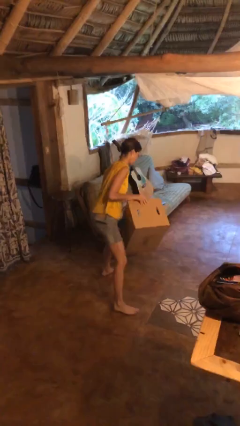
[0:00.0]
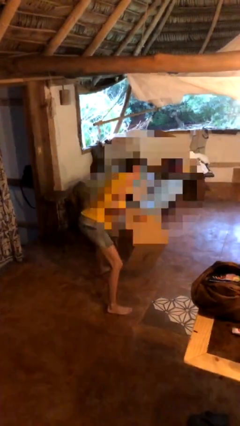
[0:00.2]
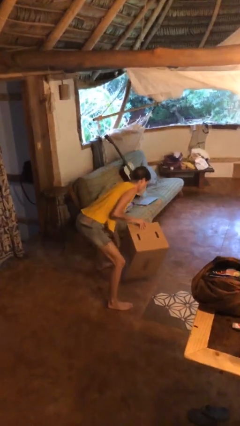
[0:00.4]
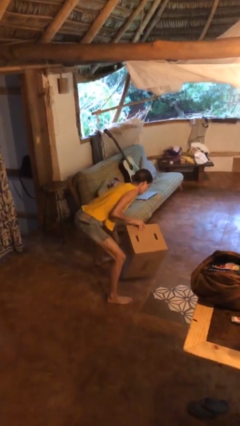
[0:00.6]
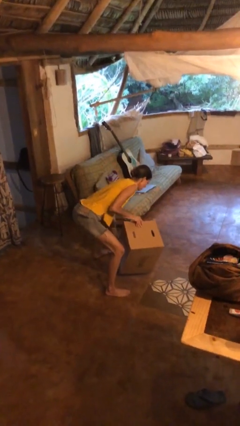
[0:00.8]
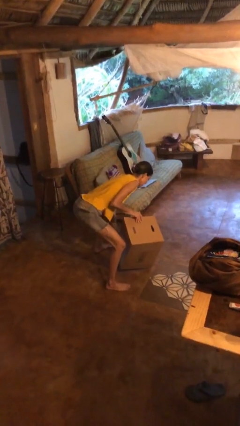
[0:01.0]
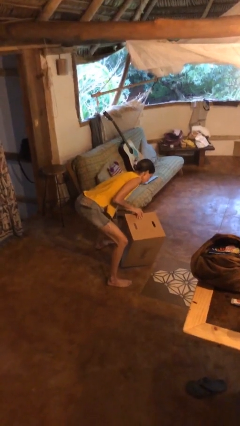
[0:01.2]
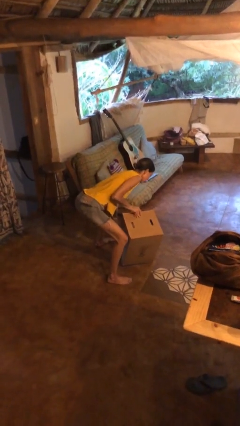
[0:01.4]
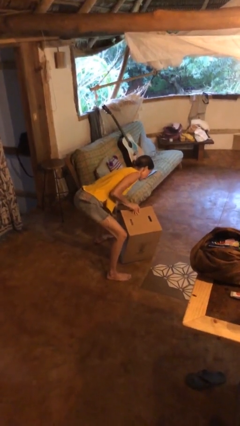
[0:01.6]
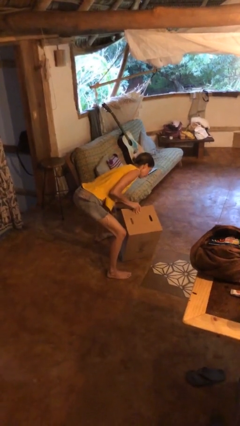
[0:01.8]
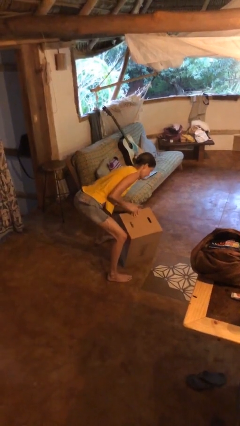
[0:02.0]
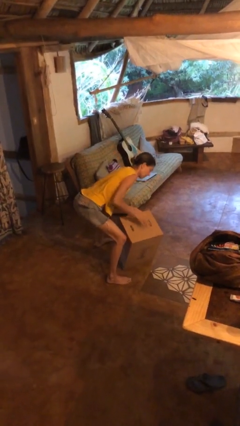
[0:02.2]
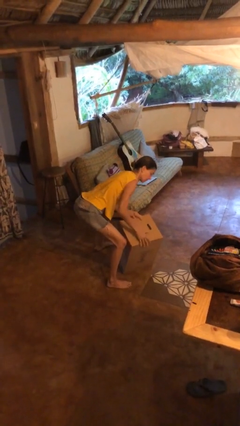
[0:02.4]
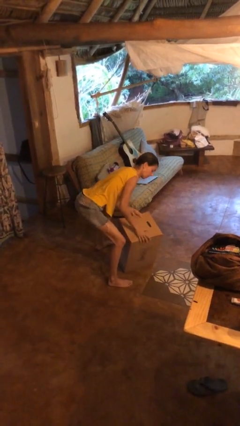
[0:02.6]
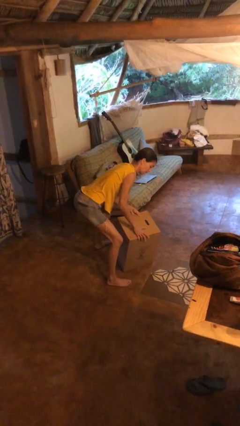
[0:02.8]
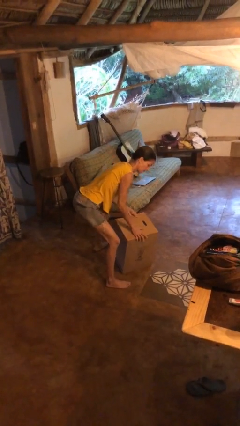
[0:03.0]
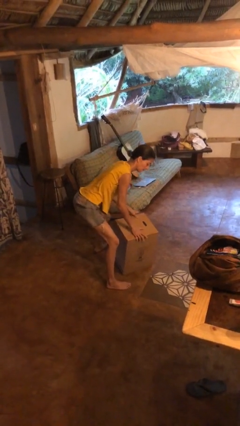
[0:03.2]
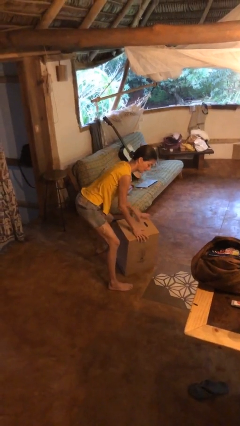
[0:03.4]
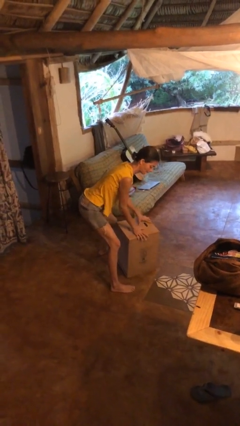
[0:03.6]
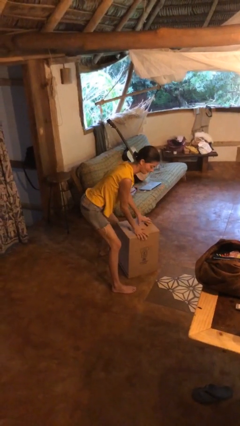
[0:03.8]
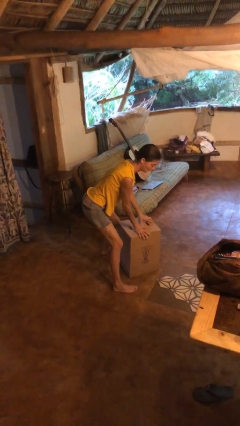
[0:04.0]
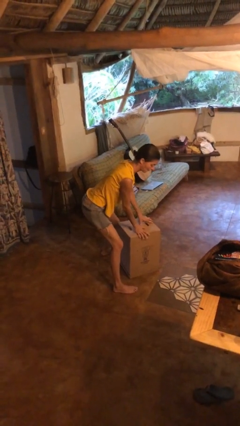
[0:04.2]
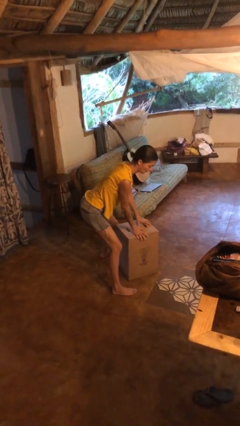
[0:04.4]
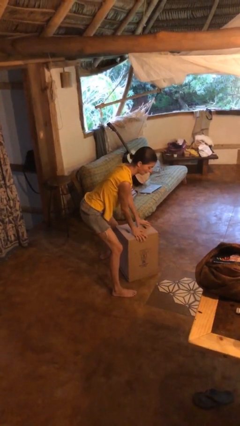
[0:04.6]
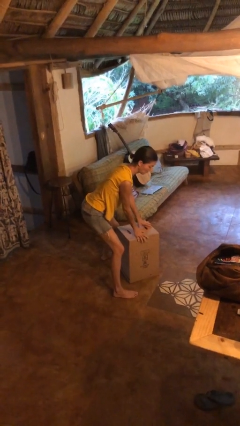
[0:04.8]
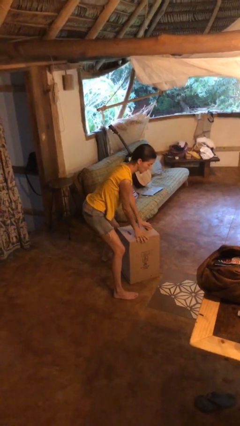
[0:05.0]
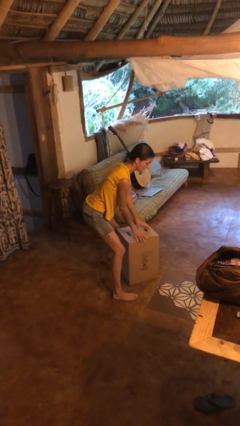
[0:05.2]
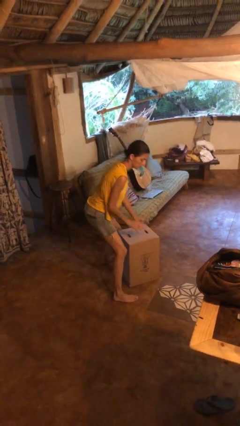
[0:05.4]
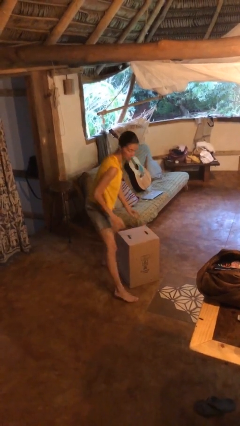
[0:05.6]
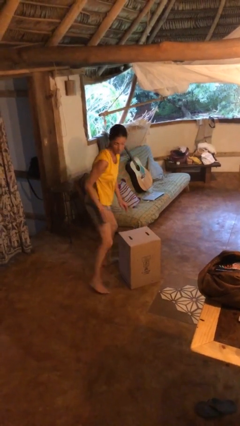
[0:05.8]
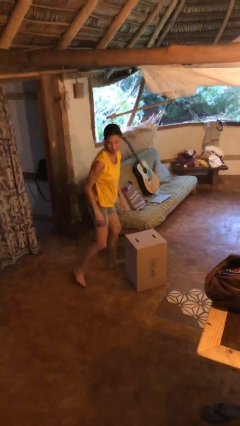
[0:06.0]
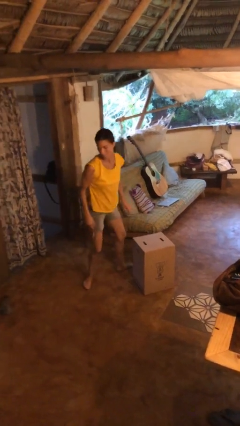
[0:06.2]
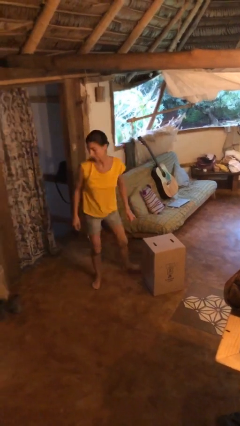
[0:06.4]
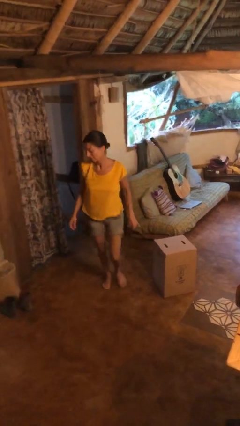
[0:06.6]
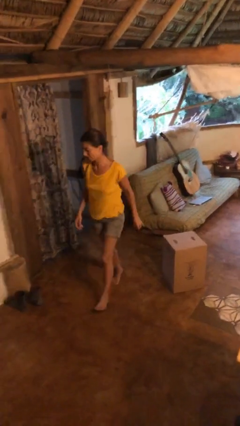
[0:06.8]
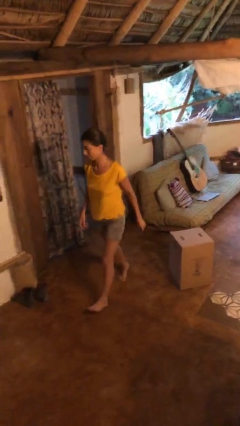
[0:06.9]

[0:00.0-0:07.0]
person puts down object on floor

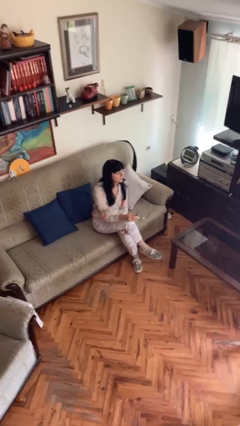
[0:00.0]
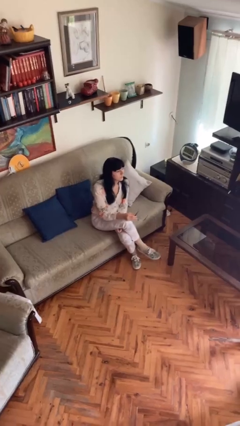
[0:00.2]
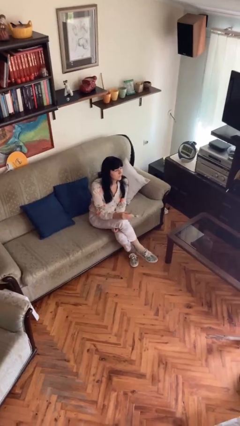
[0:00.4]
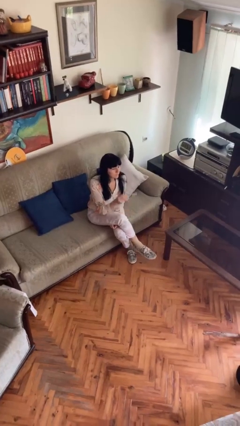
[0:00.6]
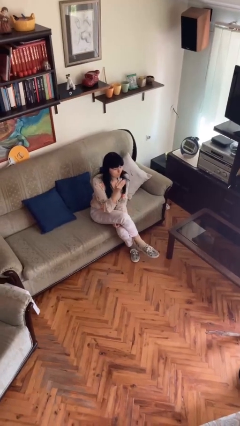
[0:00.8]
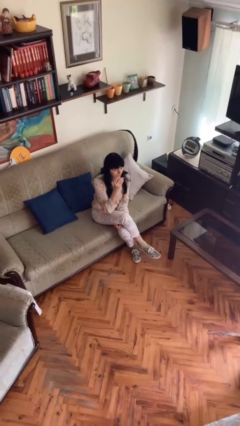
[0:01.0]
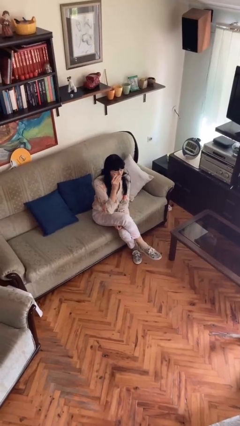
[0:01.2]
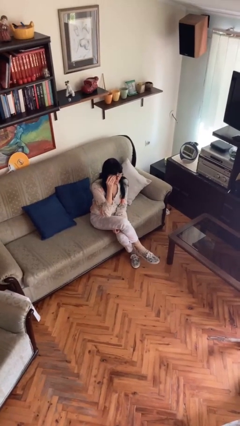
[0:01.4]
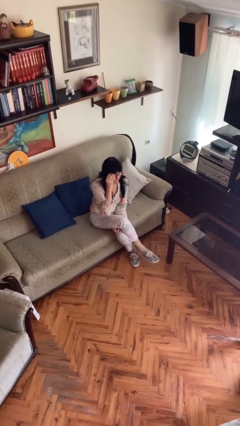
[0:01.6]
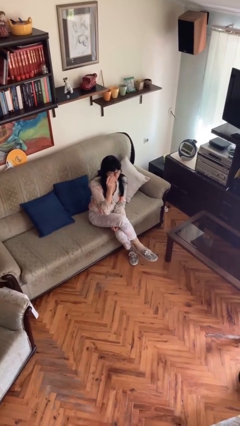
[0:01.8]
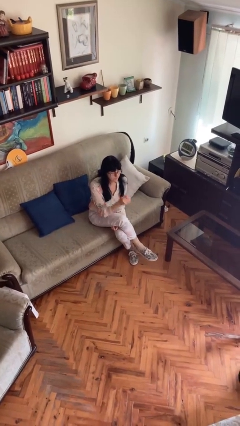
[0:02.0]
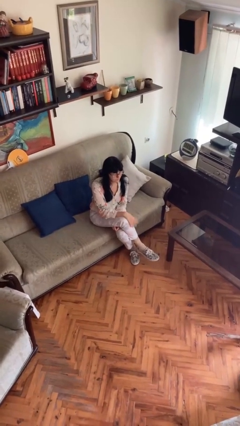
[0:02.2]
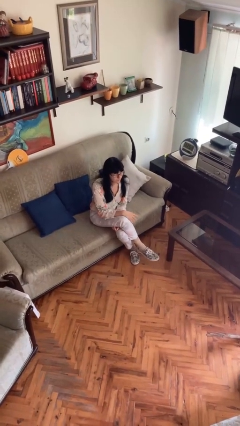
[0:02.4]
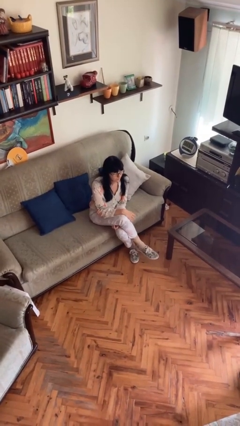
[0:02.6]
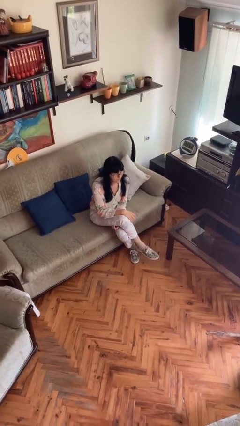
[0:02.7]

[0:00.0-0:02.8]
person puts on glasses

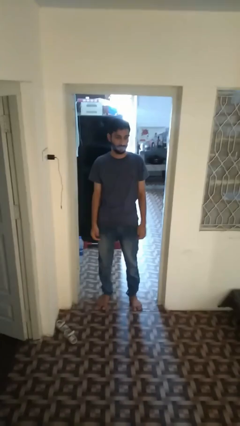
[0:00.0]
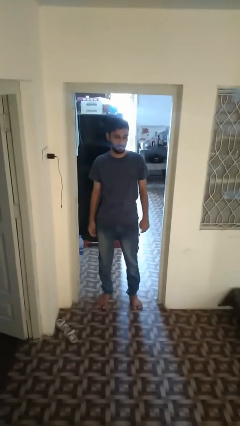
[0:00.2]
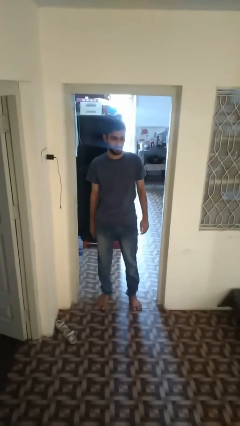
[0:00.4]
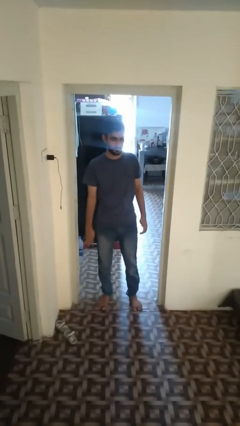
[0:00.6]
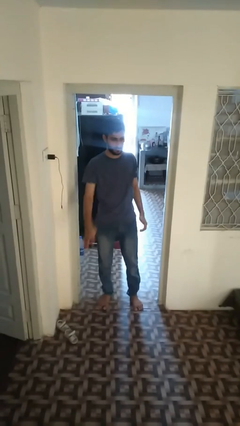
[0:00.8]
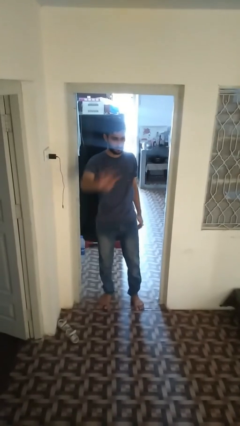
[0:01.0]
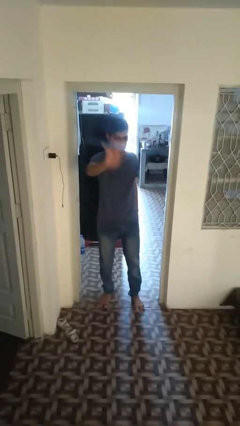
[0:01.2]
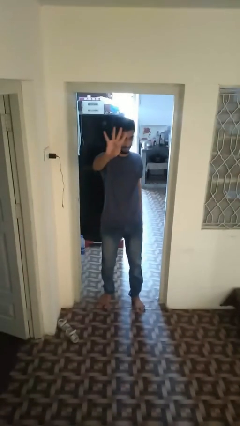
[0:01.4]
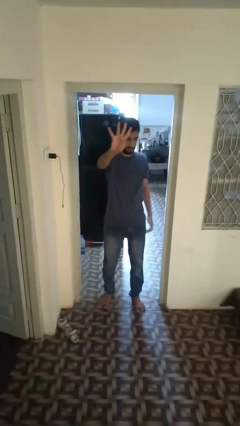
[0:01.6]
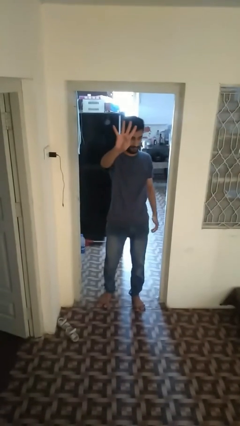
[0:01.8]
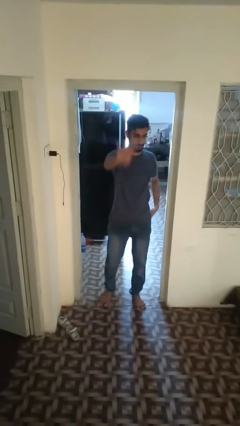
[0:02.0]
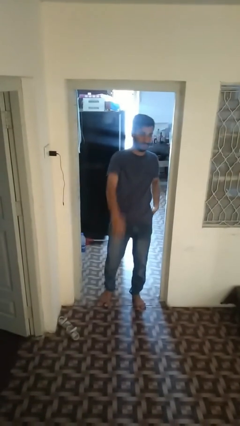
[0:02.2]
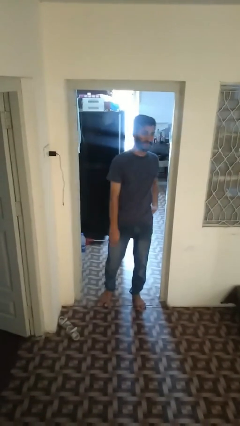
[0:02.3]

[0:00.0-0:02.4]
person gestures number four

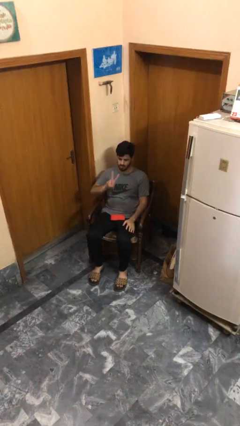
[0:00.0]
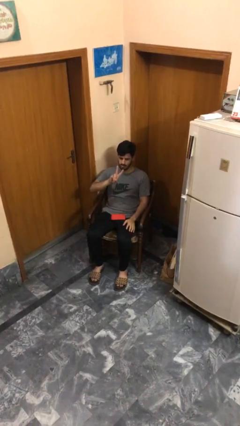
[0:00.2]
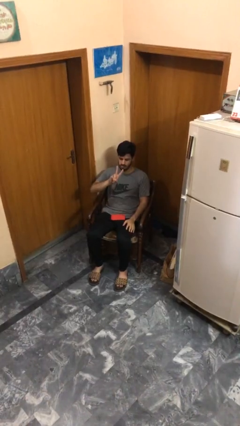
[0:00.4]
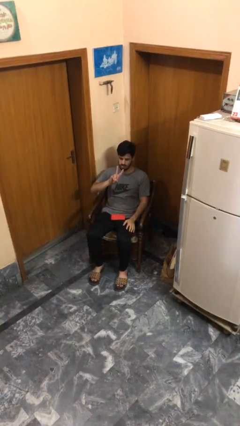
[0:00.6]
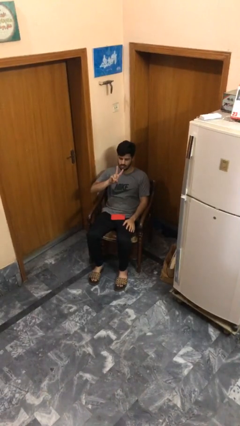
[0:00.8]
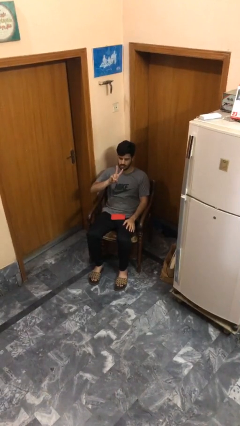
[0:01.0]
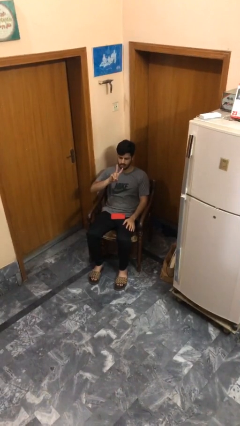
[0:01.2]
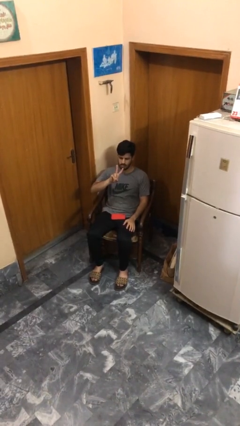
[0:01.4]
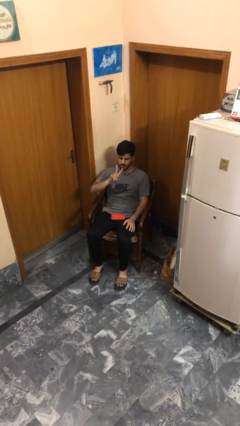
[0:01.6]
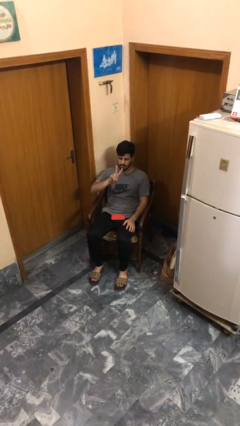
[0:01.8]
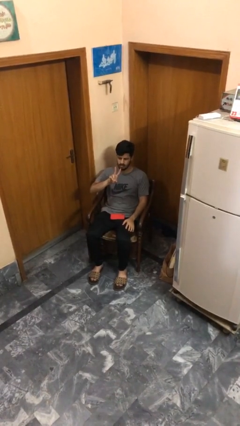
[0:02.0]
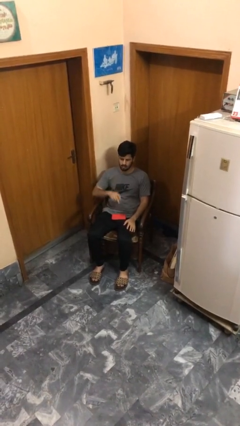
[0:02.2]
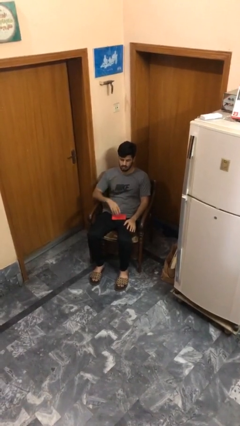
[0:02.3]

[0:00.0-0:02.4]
person gestures peace

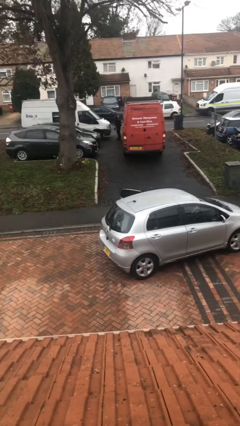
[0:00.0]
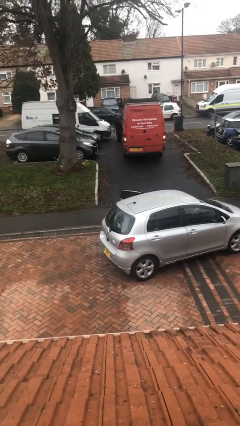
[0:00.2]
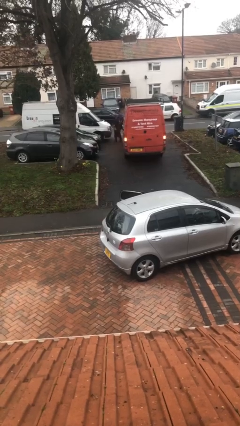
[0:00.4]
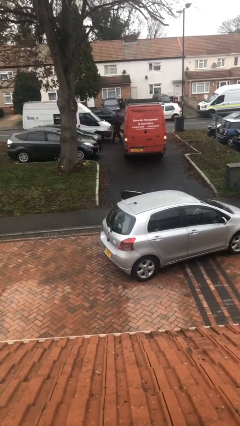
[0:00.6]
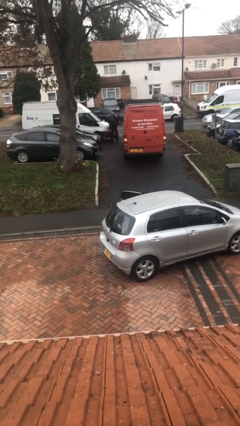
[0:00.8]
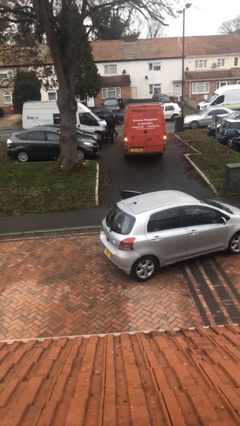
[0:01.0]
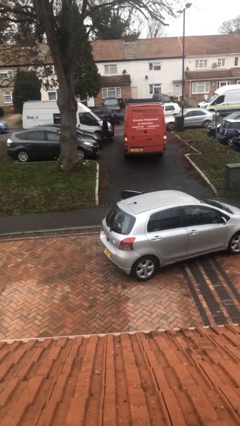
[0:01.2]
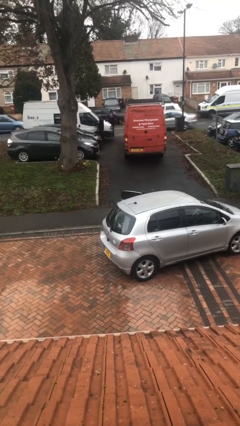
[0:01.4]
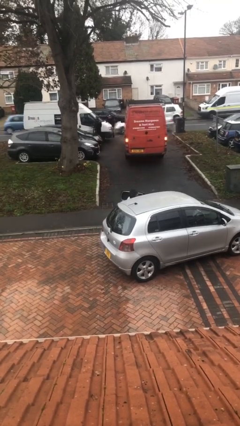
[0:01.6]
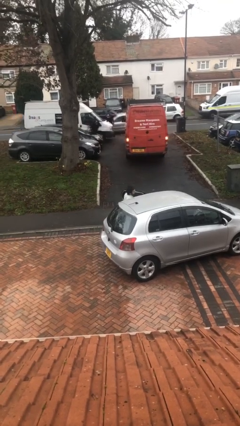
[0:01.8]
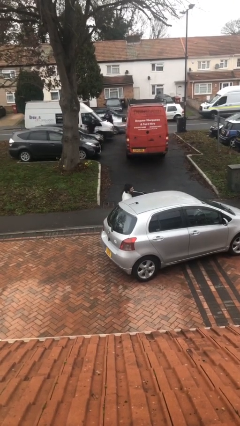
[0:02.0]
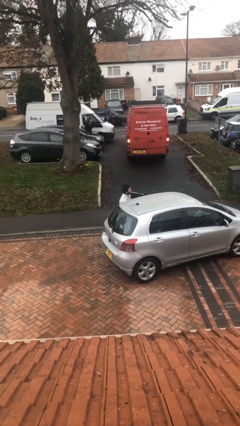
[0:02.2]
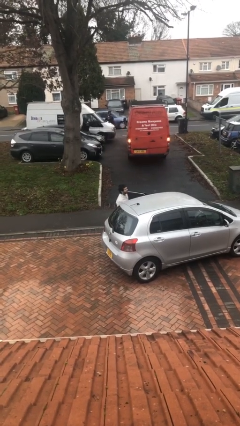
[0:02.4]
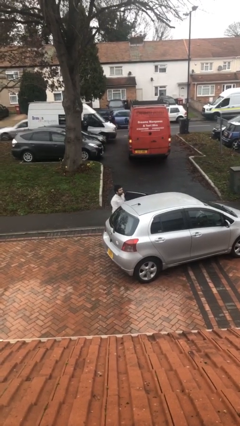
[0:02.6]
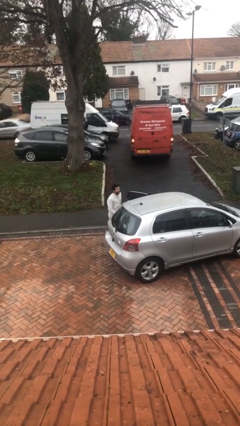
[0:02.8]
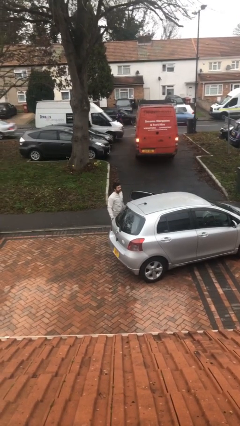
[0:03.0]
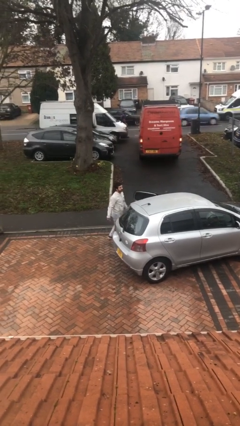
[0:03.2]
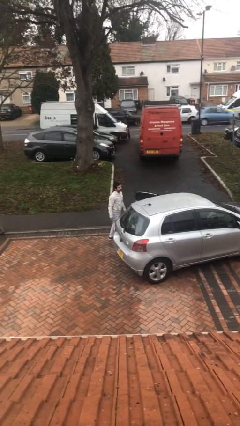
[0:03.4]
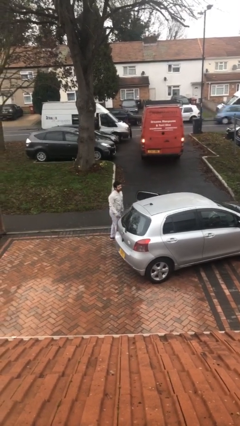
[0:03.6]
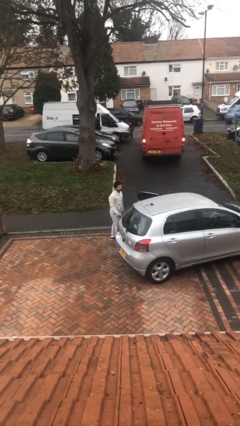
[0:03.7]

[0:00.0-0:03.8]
person exits car
